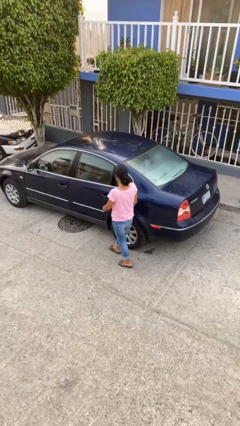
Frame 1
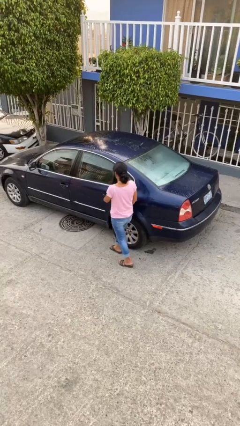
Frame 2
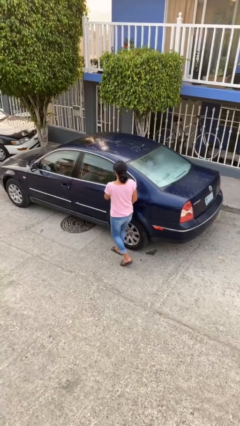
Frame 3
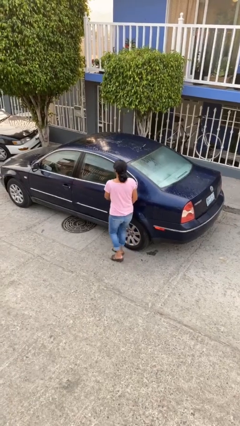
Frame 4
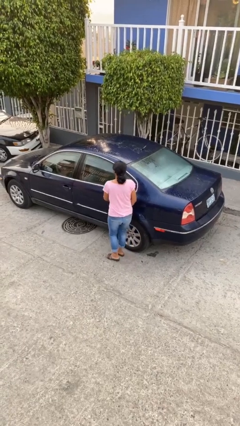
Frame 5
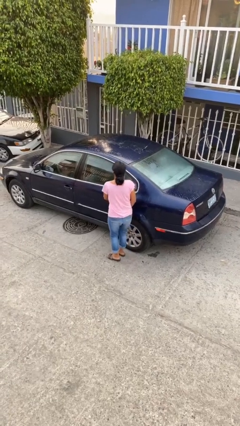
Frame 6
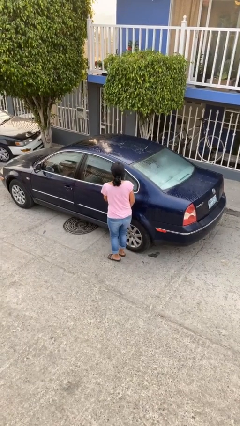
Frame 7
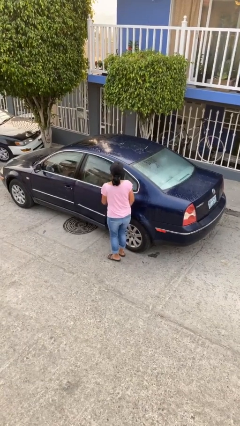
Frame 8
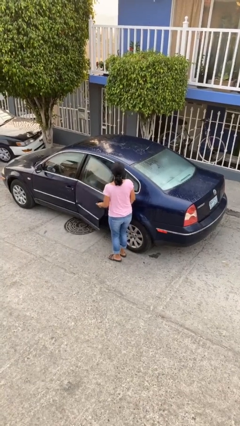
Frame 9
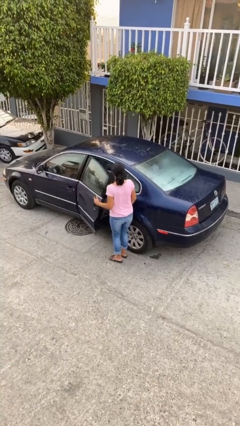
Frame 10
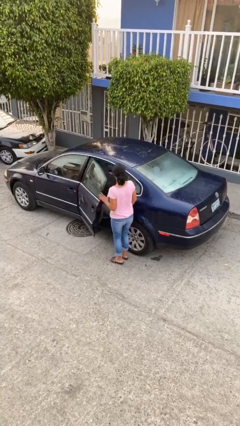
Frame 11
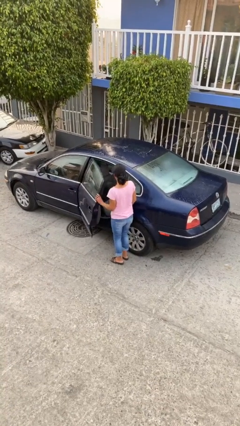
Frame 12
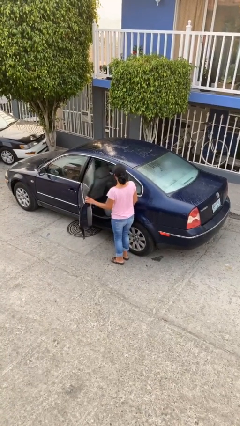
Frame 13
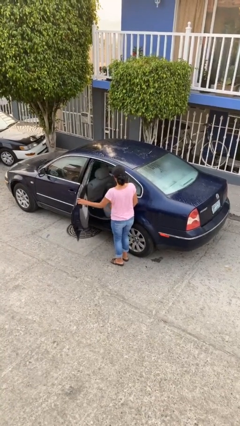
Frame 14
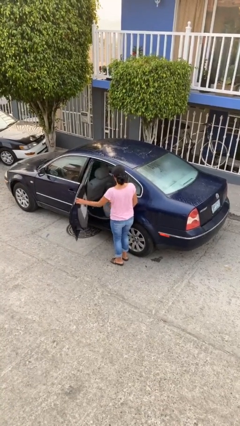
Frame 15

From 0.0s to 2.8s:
person opens car door

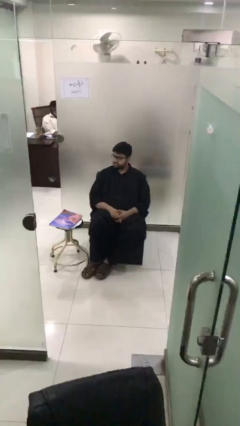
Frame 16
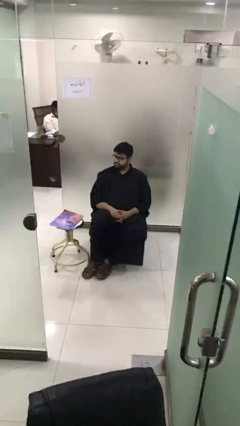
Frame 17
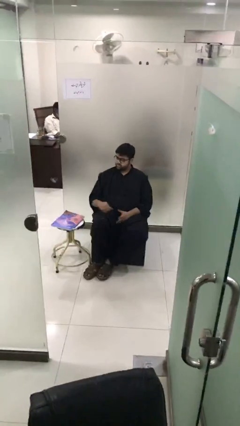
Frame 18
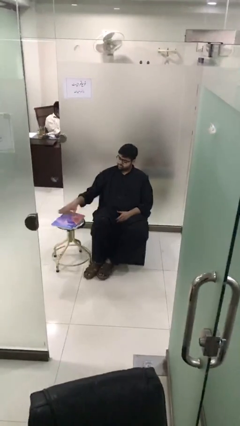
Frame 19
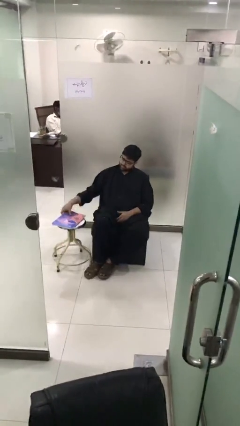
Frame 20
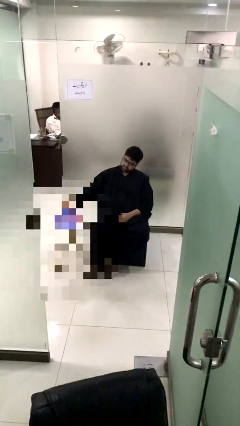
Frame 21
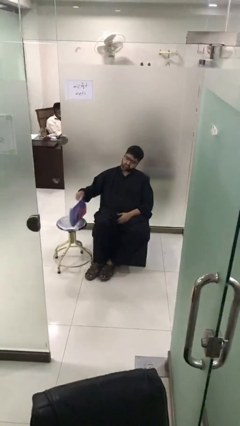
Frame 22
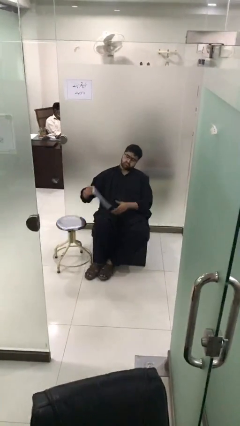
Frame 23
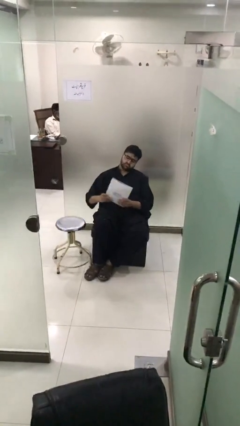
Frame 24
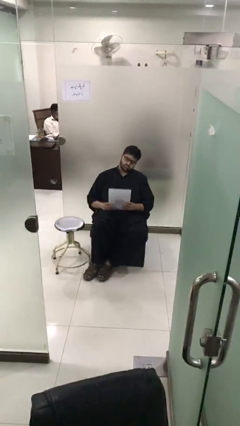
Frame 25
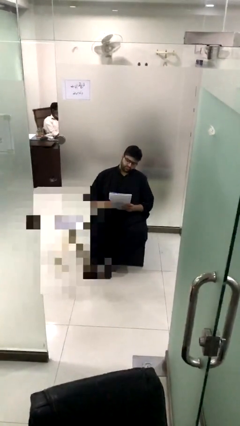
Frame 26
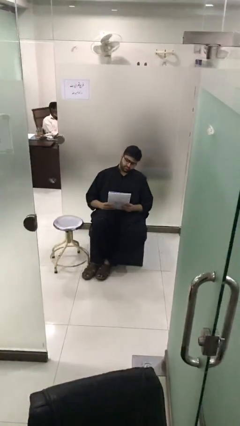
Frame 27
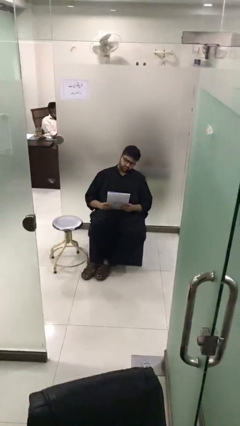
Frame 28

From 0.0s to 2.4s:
person picks up object from table

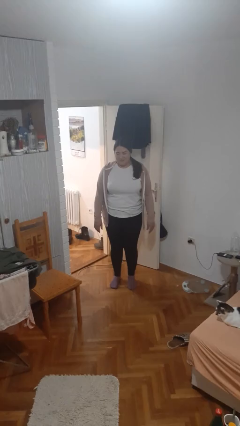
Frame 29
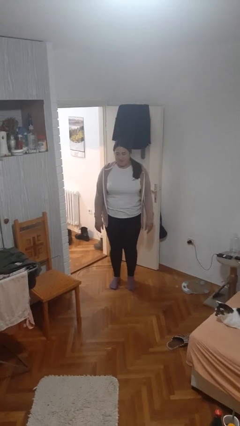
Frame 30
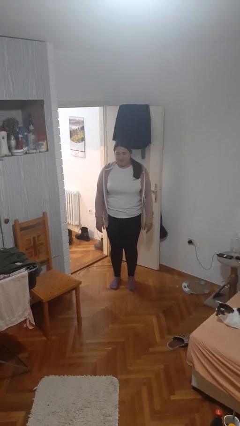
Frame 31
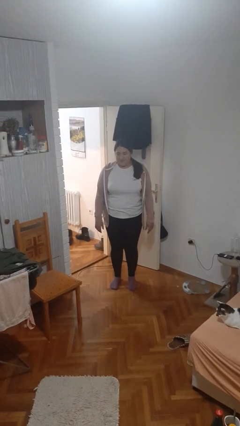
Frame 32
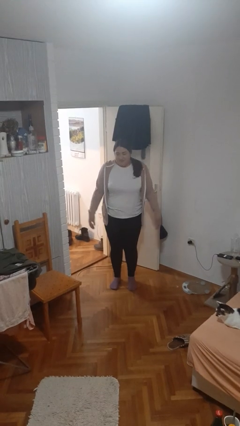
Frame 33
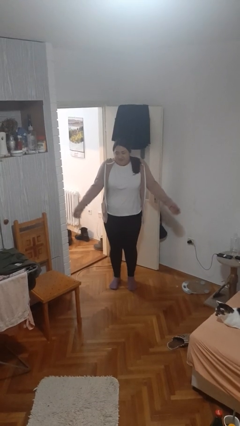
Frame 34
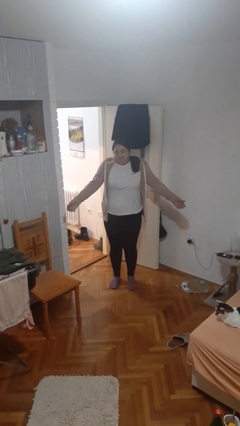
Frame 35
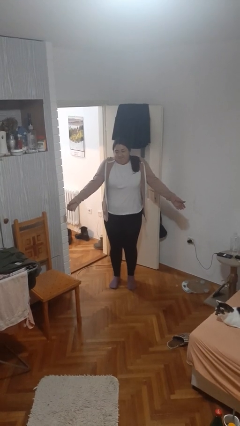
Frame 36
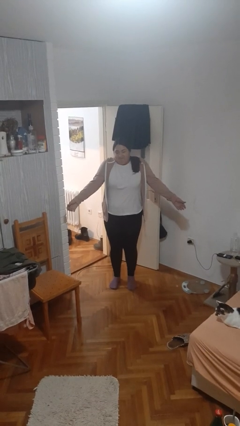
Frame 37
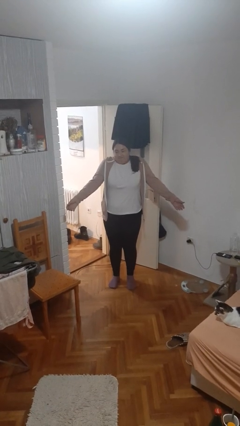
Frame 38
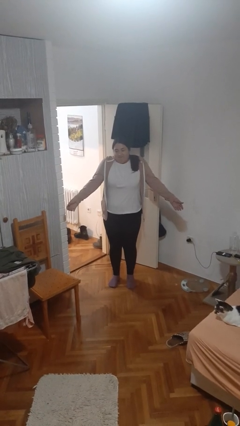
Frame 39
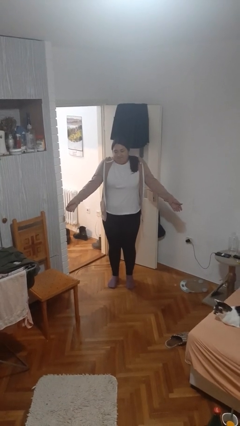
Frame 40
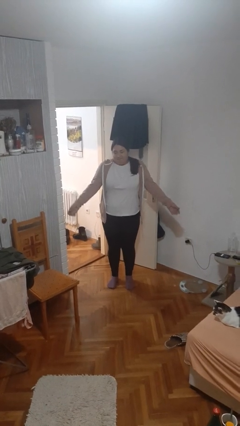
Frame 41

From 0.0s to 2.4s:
person shrugs

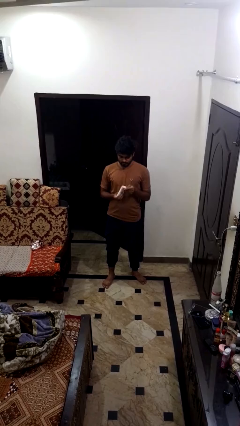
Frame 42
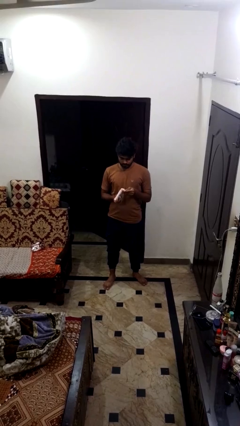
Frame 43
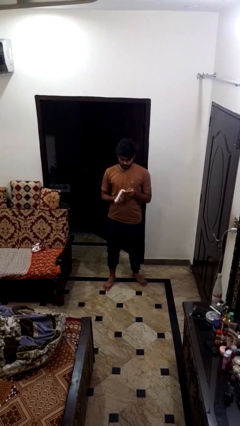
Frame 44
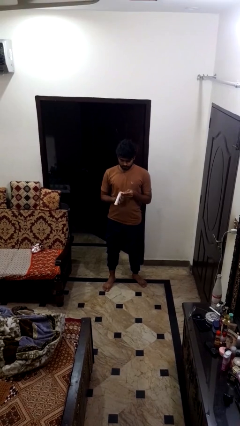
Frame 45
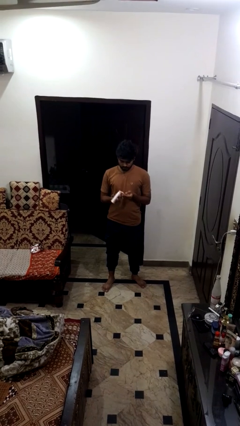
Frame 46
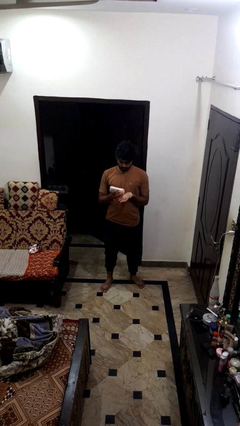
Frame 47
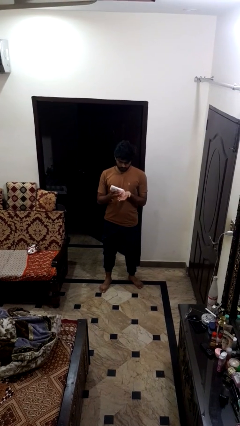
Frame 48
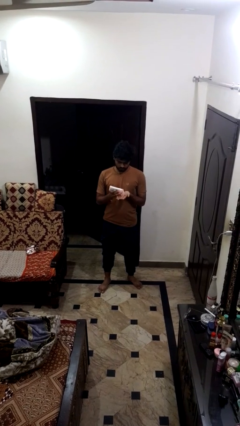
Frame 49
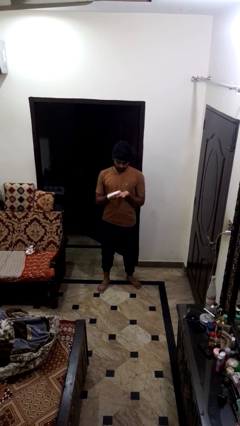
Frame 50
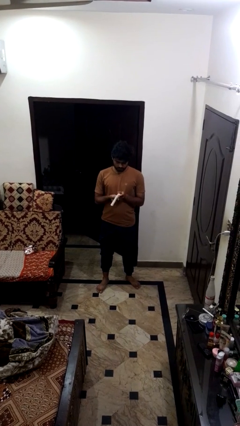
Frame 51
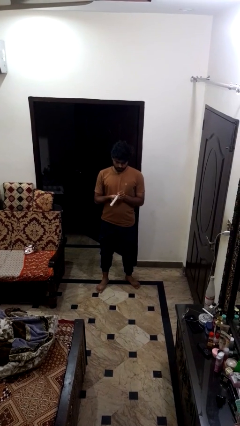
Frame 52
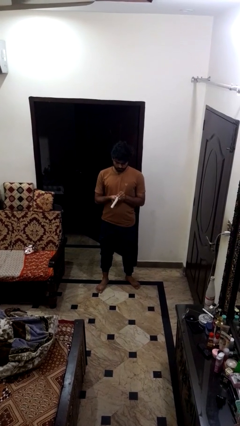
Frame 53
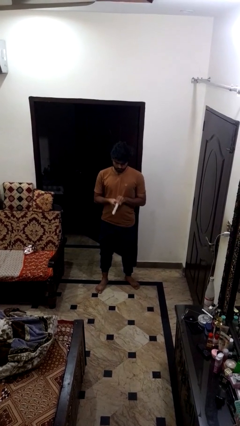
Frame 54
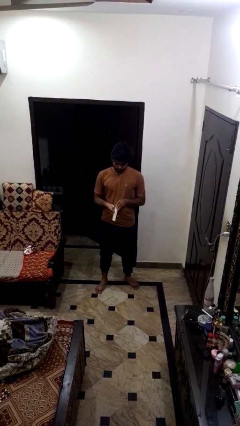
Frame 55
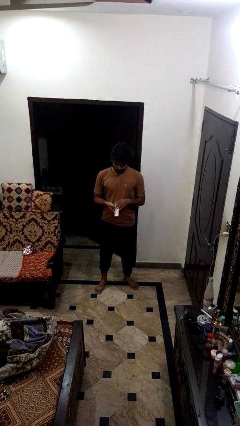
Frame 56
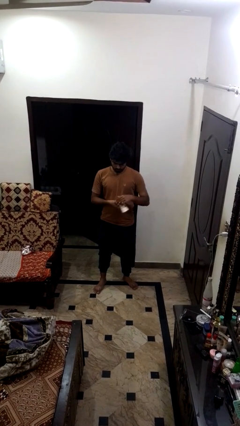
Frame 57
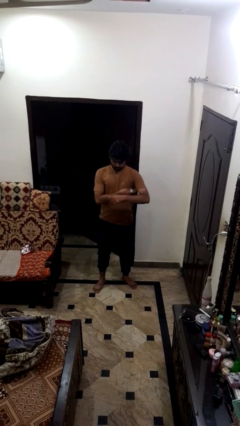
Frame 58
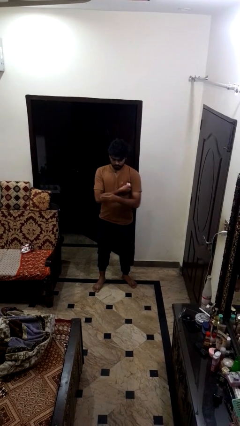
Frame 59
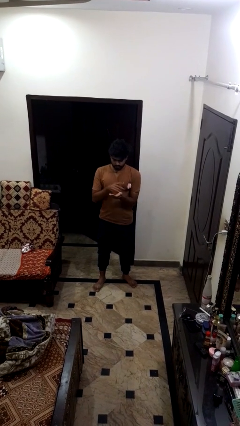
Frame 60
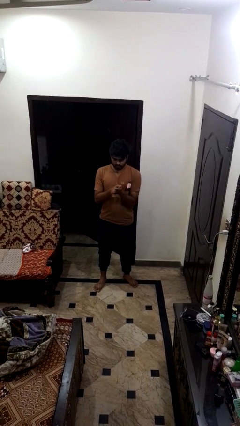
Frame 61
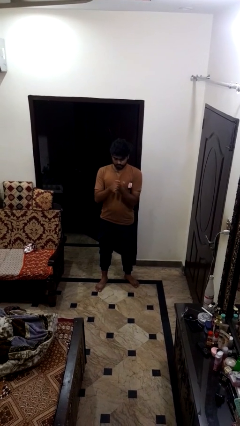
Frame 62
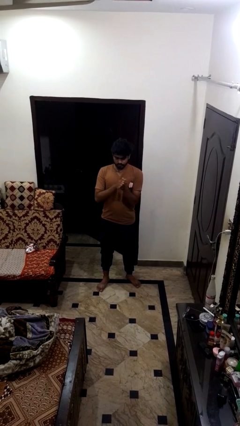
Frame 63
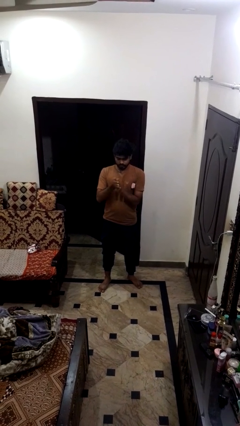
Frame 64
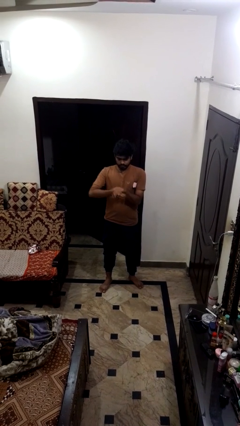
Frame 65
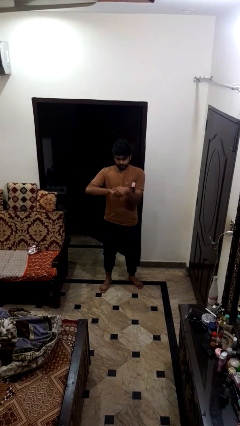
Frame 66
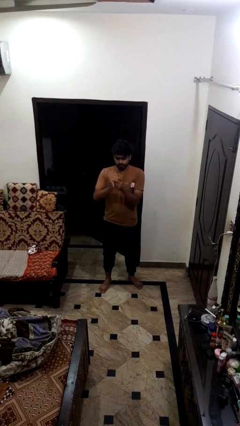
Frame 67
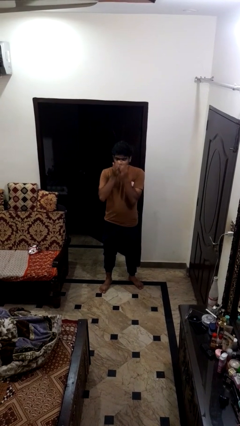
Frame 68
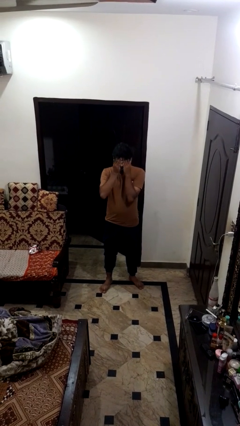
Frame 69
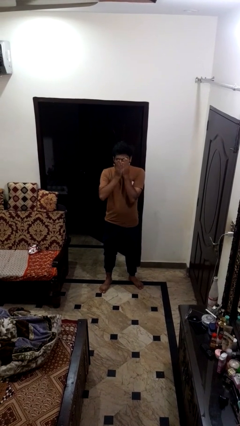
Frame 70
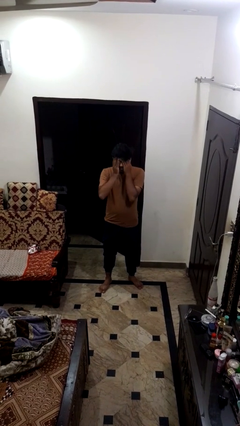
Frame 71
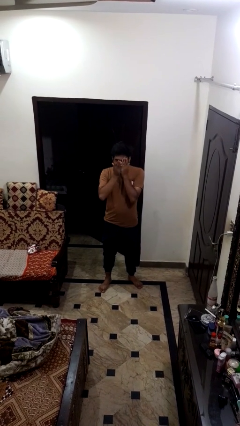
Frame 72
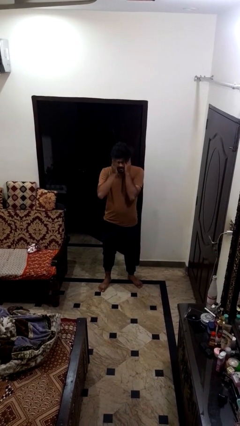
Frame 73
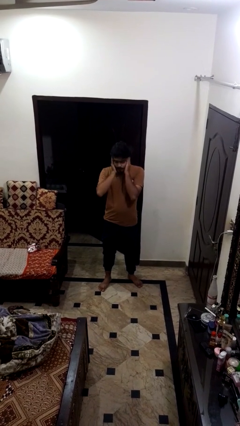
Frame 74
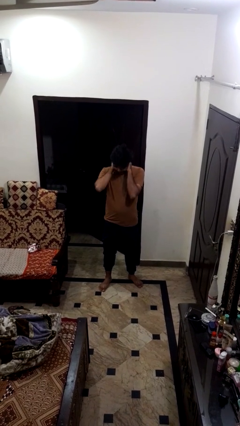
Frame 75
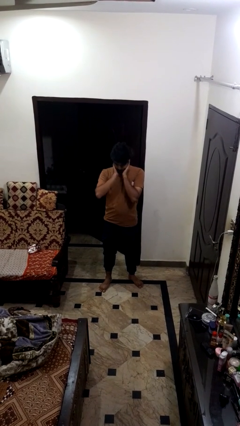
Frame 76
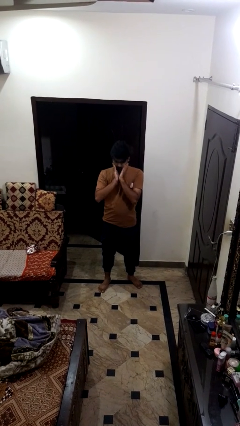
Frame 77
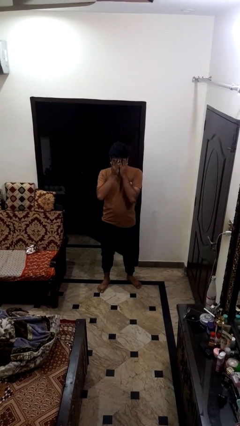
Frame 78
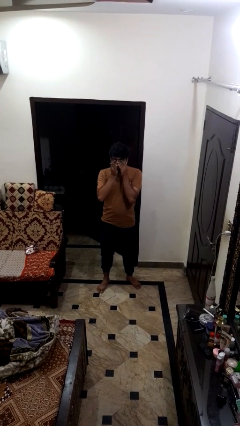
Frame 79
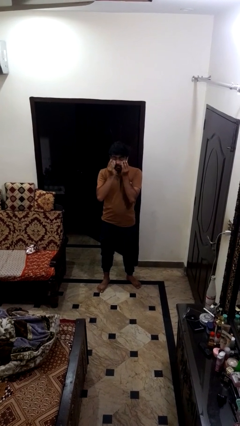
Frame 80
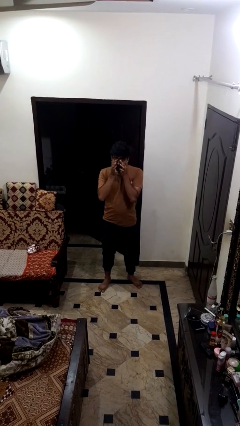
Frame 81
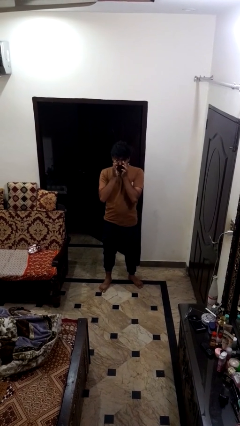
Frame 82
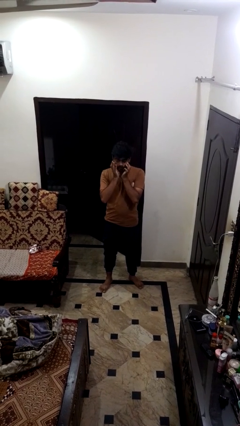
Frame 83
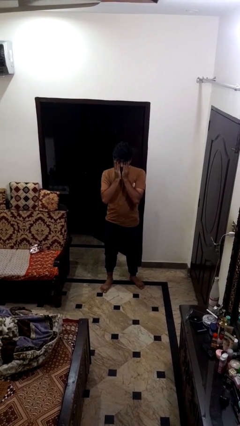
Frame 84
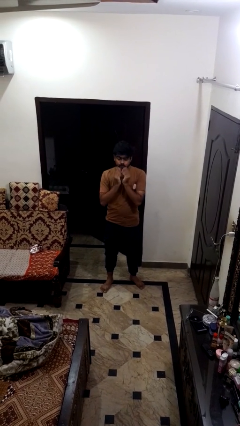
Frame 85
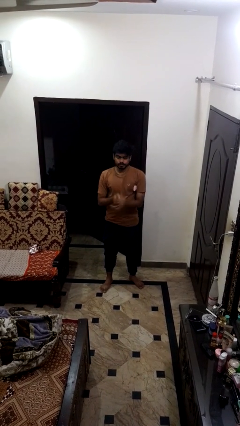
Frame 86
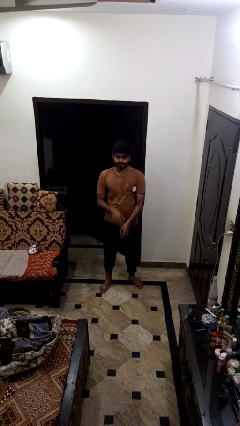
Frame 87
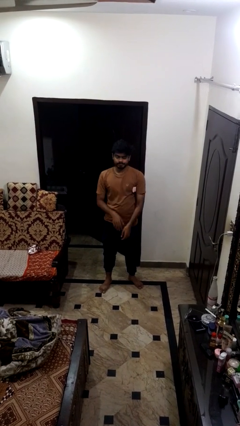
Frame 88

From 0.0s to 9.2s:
person applies facial moisturizer

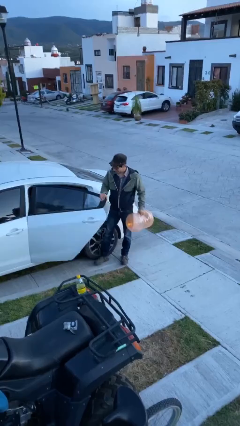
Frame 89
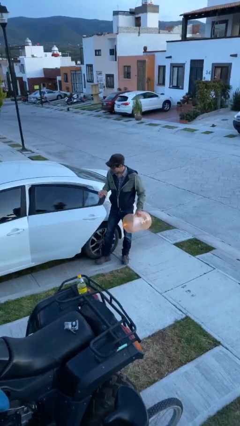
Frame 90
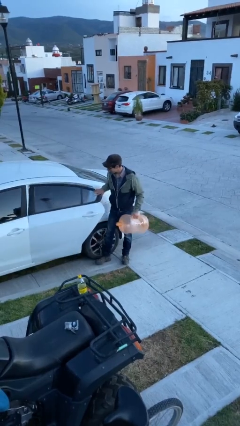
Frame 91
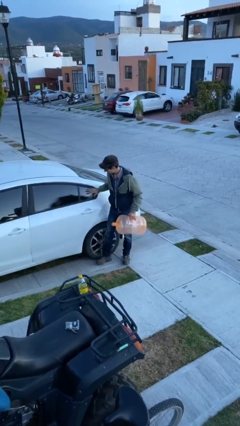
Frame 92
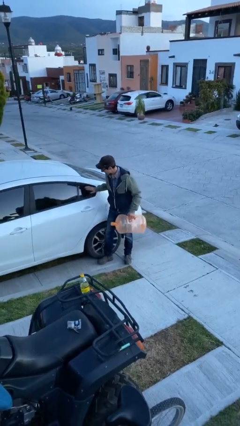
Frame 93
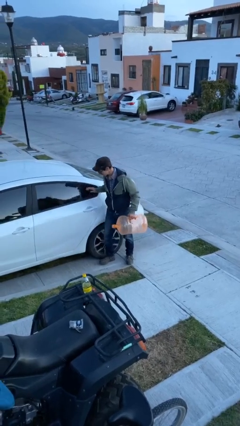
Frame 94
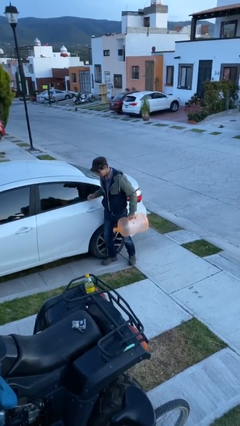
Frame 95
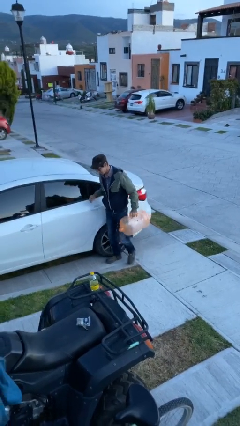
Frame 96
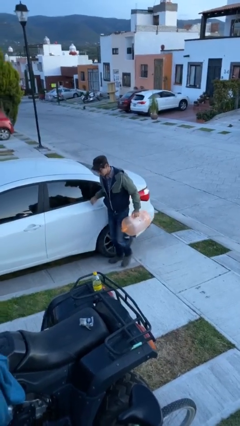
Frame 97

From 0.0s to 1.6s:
person closes car door
